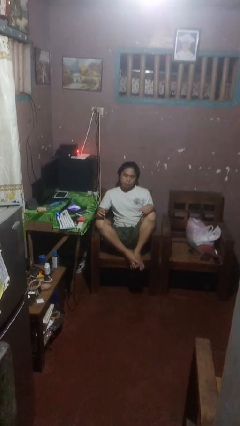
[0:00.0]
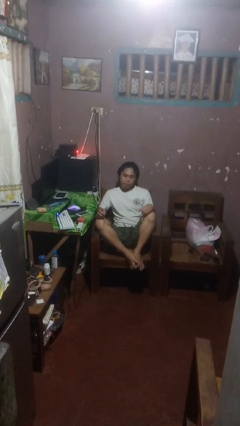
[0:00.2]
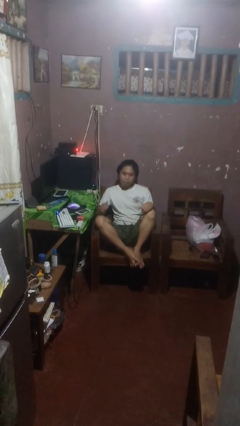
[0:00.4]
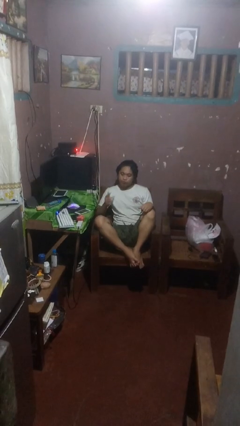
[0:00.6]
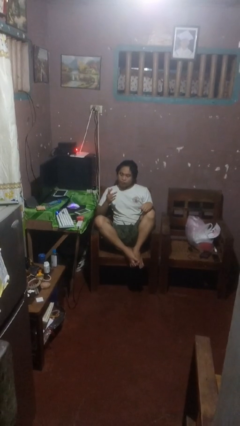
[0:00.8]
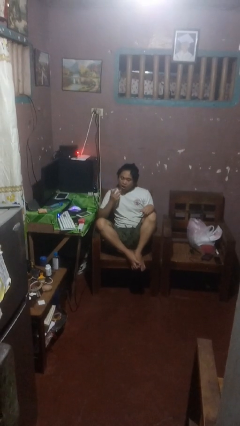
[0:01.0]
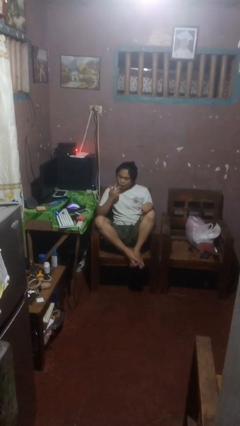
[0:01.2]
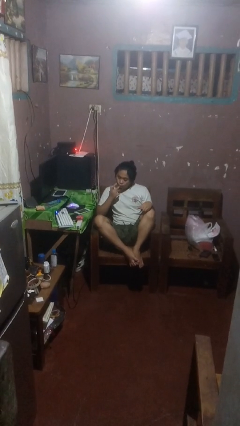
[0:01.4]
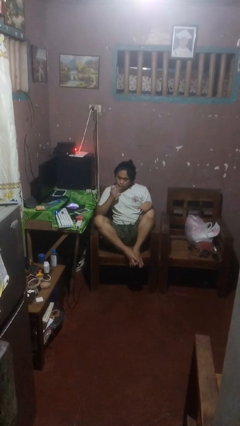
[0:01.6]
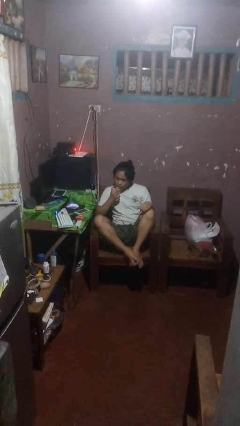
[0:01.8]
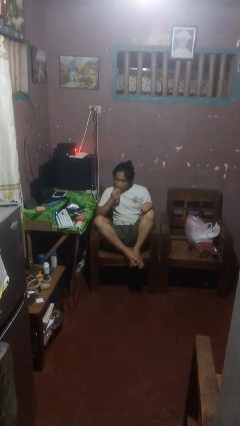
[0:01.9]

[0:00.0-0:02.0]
person licks fingers

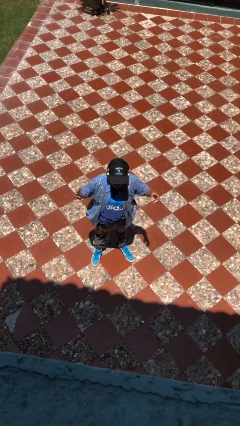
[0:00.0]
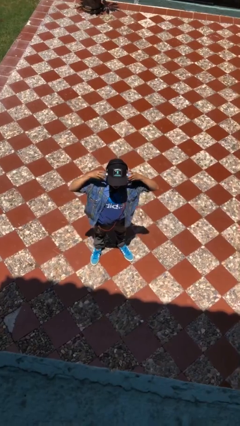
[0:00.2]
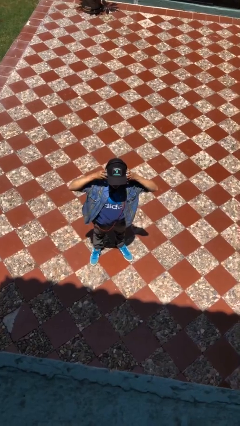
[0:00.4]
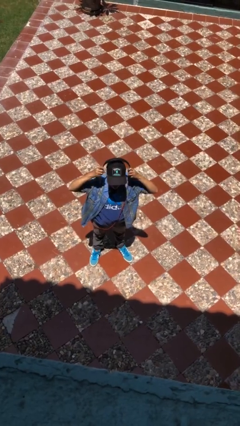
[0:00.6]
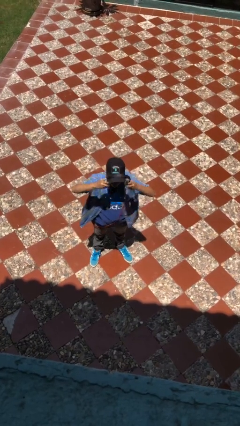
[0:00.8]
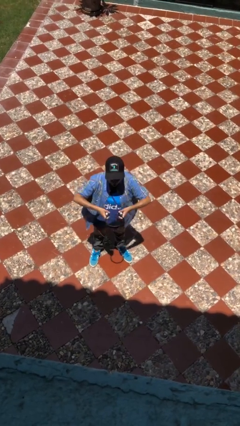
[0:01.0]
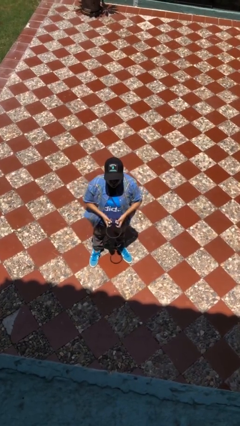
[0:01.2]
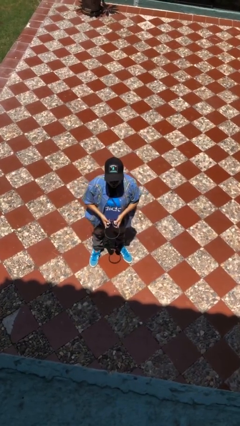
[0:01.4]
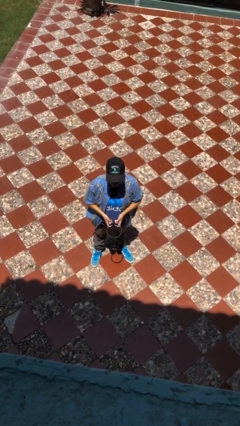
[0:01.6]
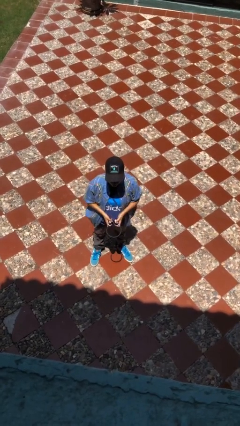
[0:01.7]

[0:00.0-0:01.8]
person takes off headphones

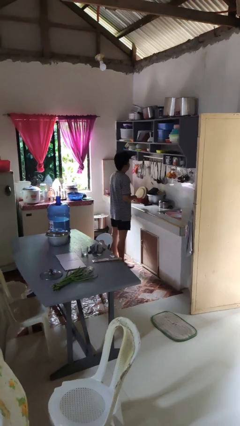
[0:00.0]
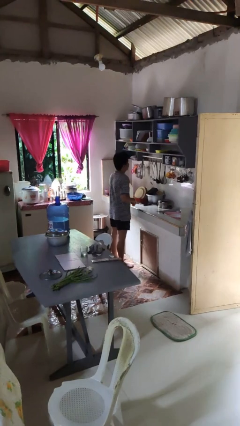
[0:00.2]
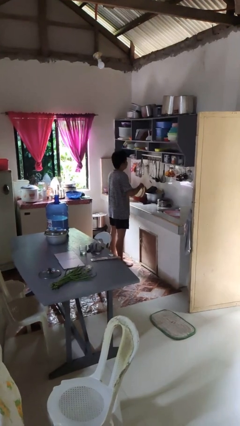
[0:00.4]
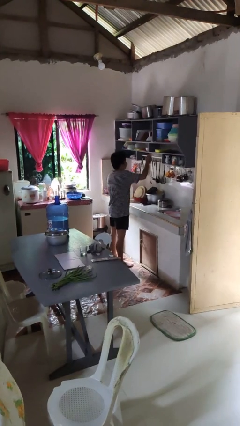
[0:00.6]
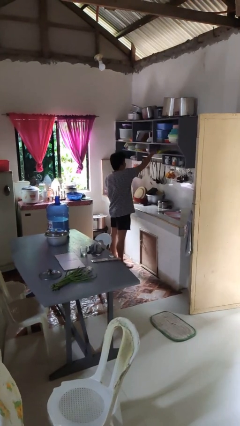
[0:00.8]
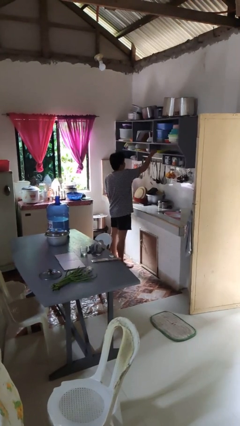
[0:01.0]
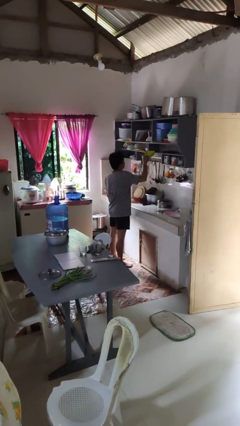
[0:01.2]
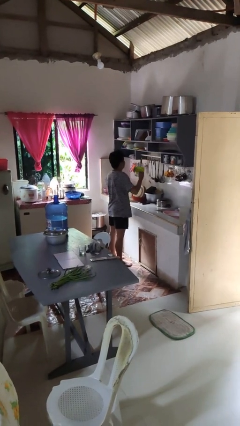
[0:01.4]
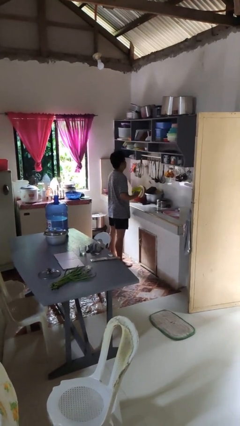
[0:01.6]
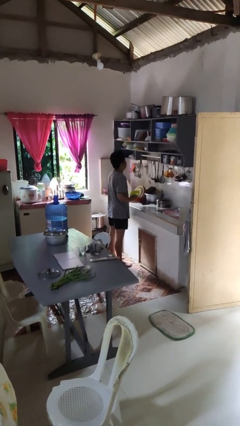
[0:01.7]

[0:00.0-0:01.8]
person takes object from cabinet

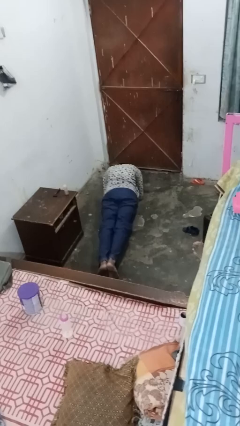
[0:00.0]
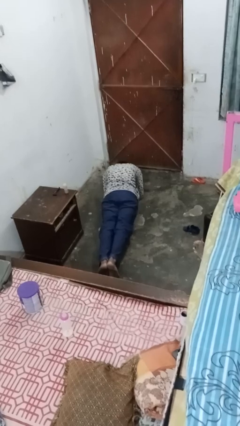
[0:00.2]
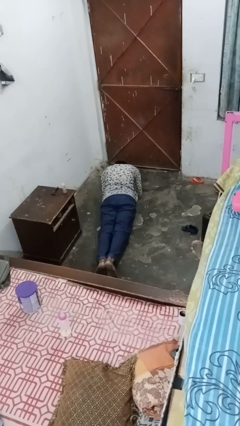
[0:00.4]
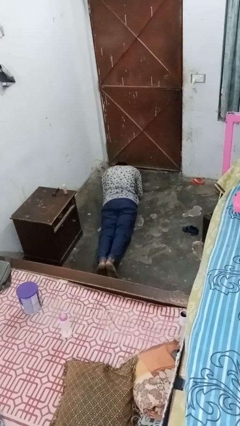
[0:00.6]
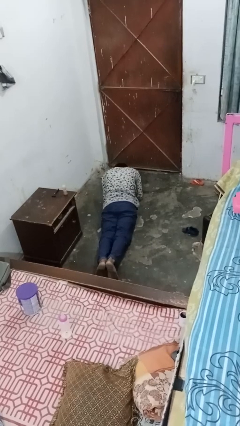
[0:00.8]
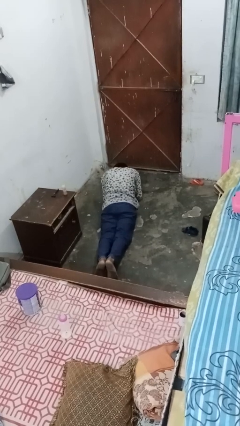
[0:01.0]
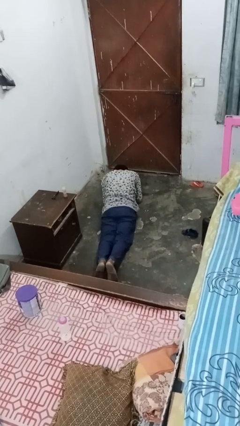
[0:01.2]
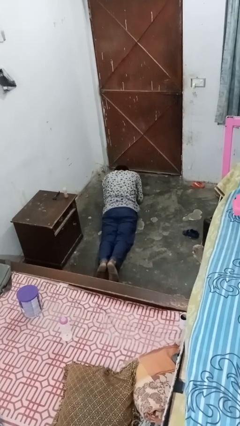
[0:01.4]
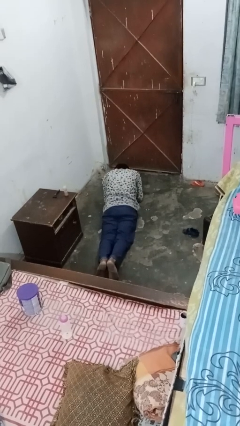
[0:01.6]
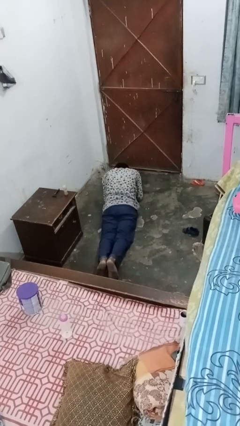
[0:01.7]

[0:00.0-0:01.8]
person stands up from floor

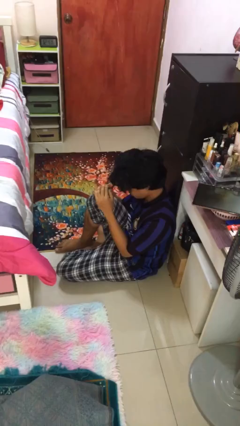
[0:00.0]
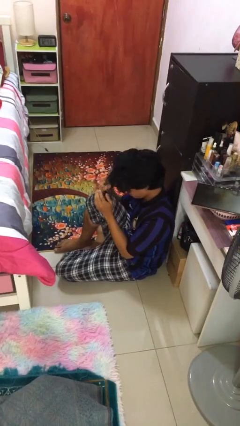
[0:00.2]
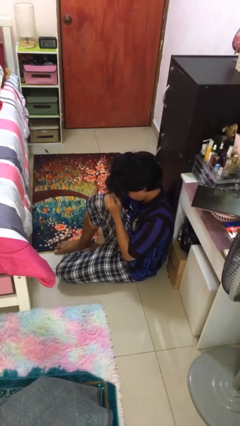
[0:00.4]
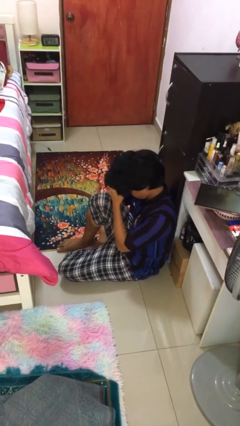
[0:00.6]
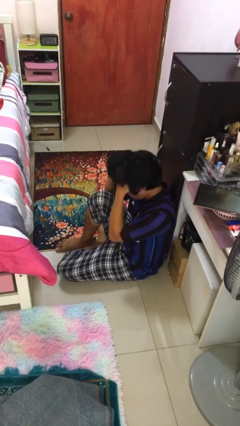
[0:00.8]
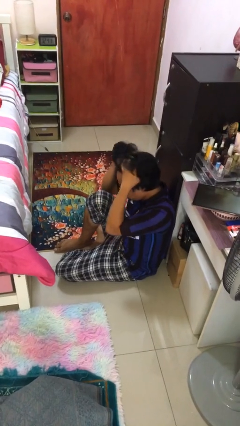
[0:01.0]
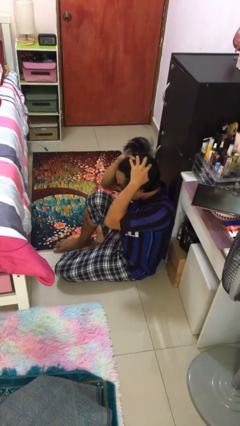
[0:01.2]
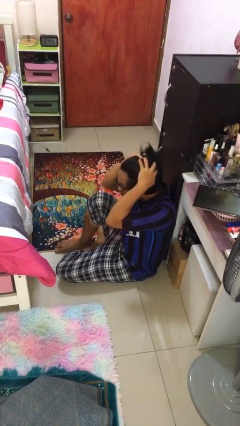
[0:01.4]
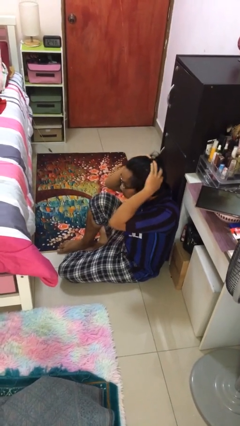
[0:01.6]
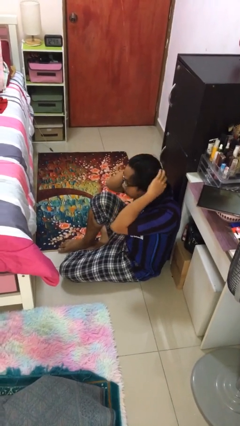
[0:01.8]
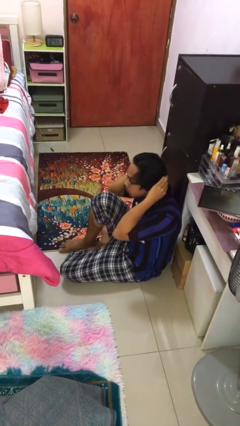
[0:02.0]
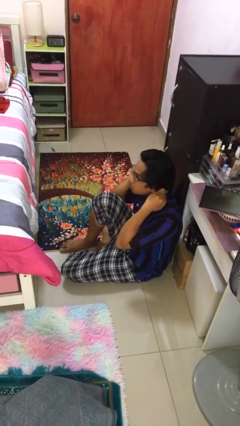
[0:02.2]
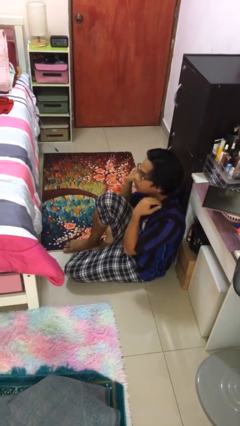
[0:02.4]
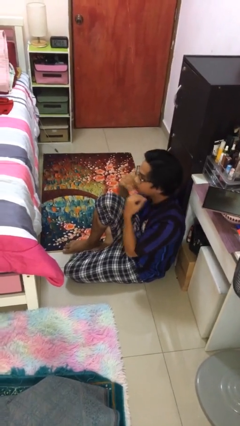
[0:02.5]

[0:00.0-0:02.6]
person strokes hair

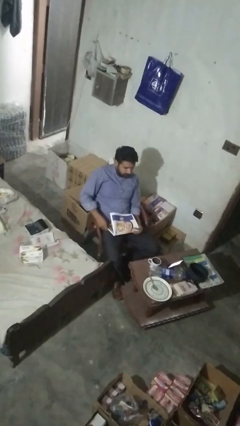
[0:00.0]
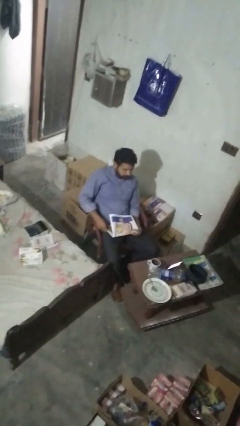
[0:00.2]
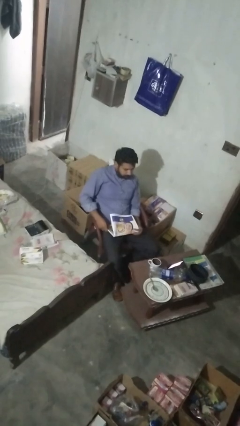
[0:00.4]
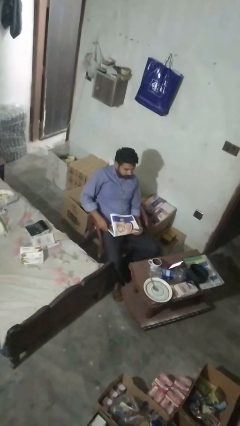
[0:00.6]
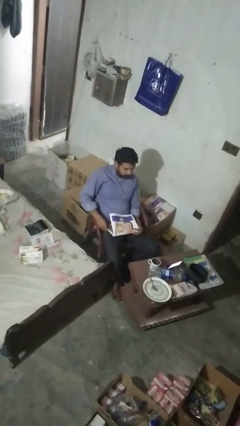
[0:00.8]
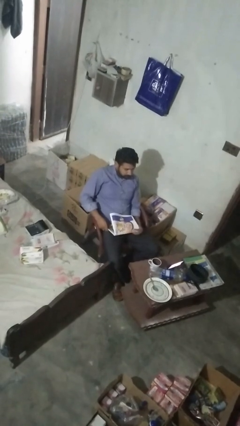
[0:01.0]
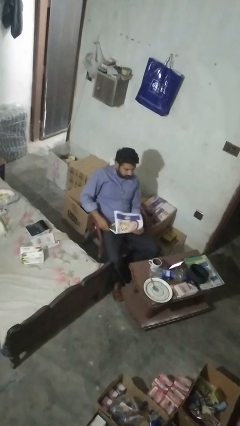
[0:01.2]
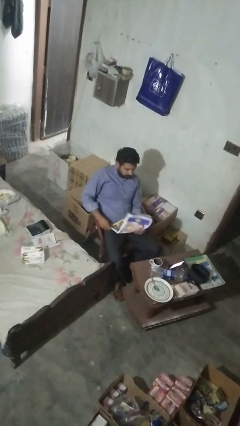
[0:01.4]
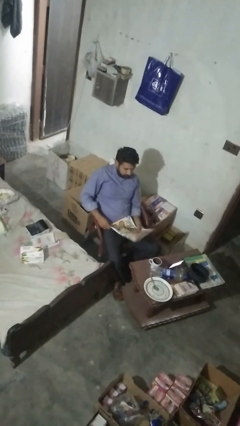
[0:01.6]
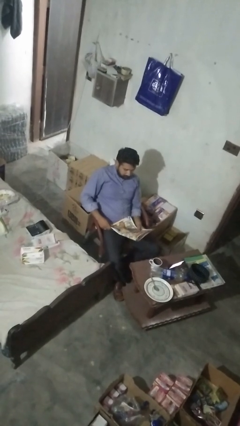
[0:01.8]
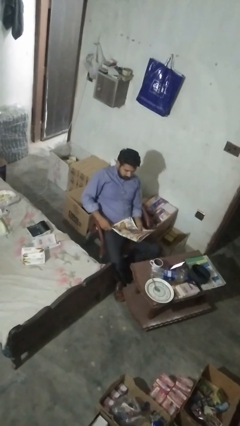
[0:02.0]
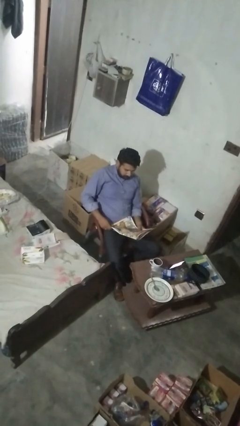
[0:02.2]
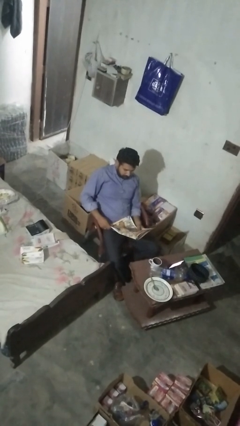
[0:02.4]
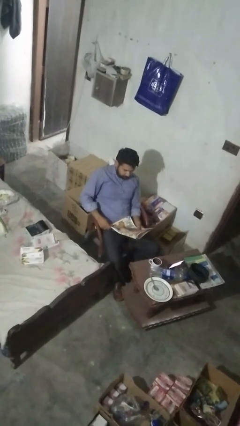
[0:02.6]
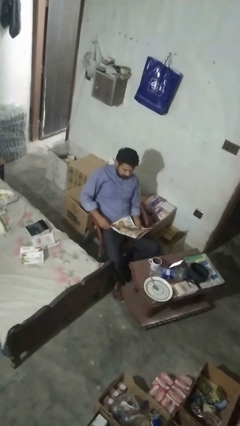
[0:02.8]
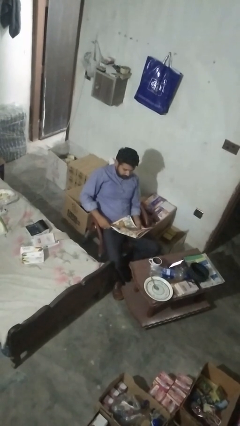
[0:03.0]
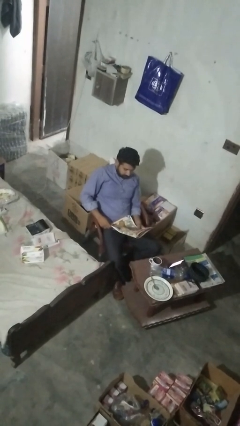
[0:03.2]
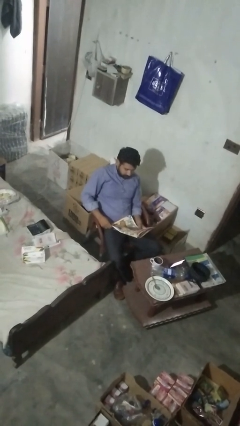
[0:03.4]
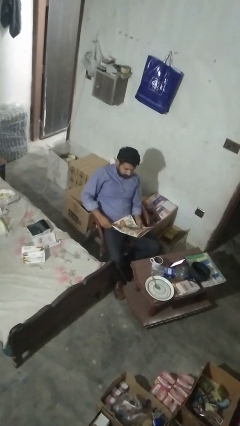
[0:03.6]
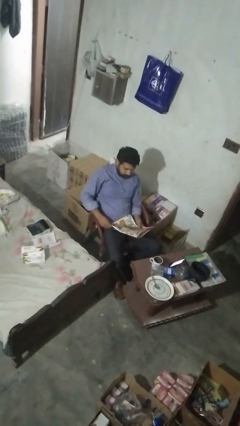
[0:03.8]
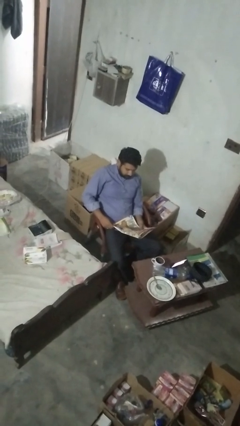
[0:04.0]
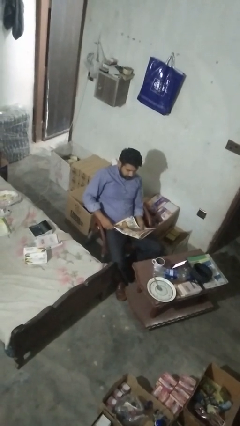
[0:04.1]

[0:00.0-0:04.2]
person reads magazine

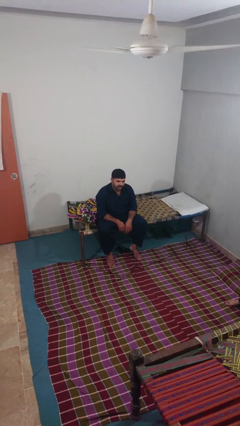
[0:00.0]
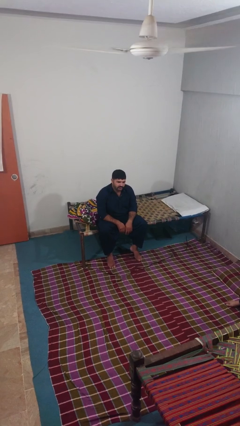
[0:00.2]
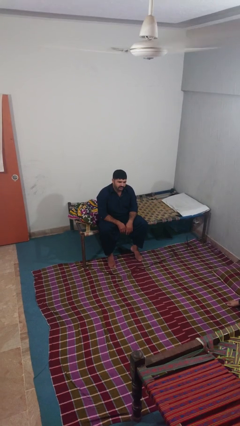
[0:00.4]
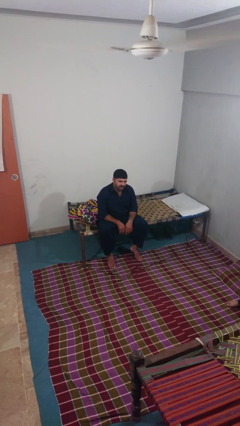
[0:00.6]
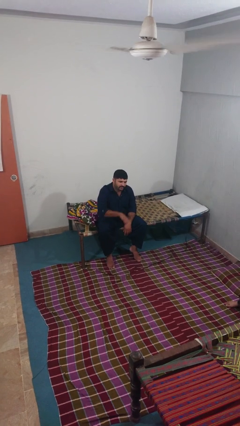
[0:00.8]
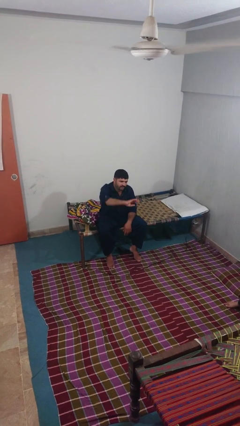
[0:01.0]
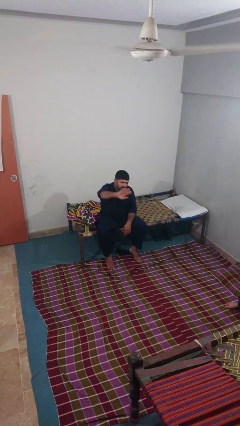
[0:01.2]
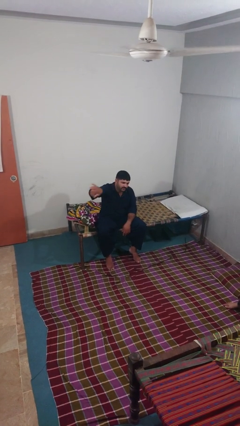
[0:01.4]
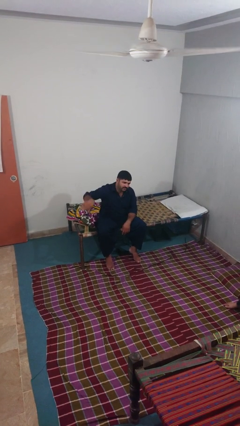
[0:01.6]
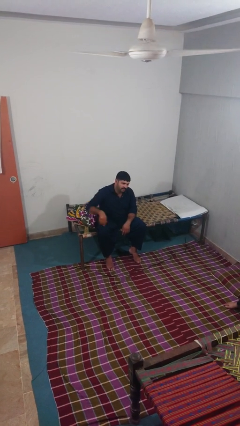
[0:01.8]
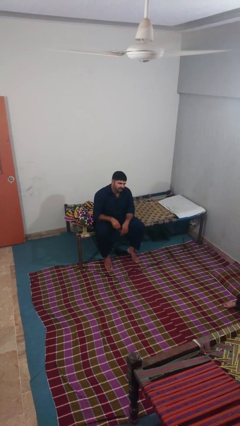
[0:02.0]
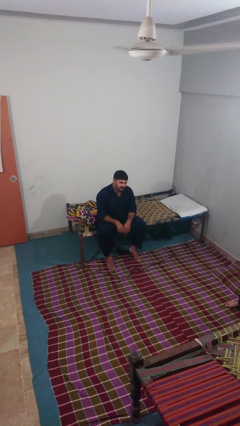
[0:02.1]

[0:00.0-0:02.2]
person gestures swipe right

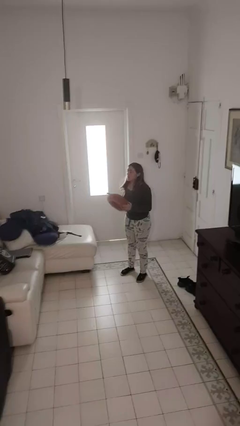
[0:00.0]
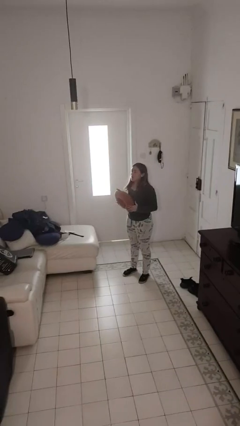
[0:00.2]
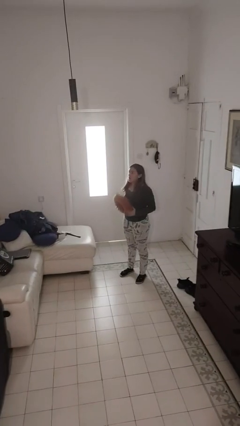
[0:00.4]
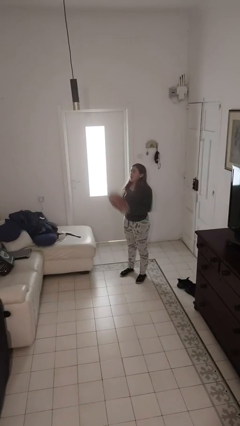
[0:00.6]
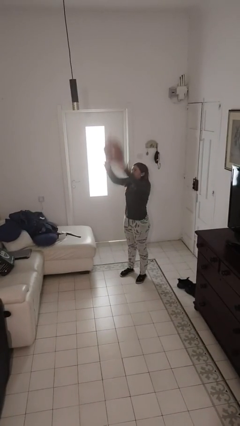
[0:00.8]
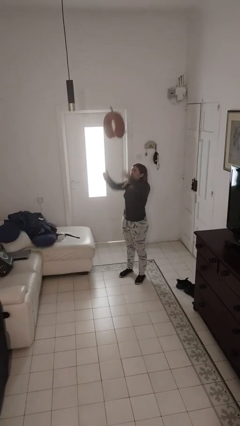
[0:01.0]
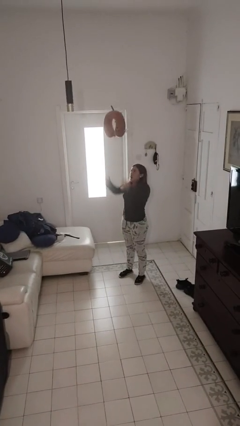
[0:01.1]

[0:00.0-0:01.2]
person drops object
